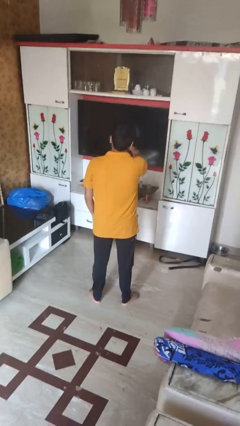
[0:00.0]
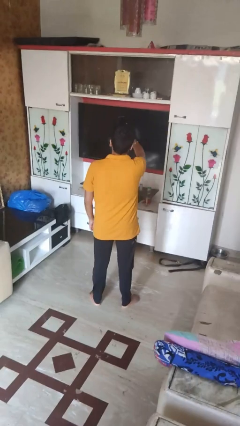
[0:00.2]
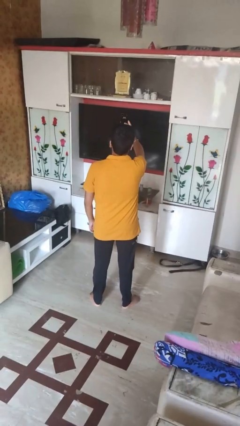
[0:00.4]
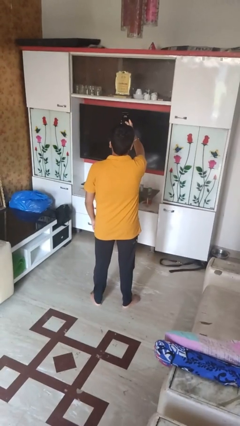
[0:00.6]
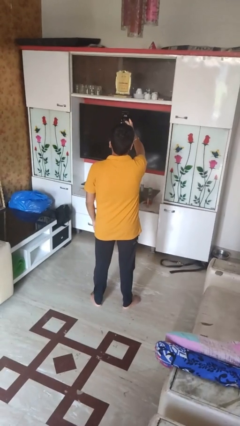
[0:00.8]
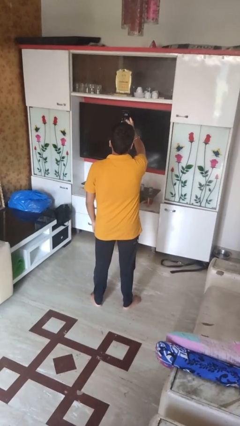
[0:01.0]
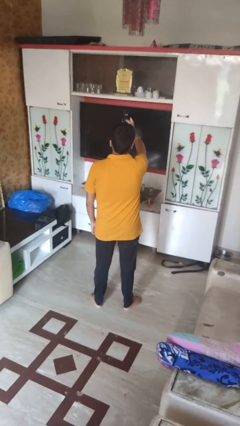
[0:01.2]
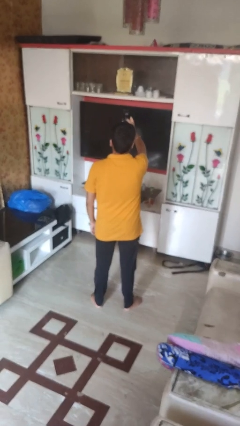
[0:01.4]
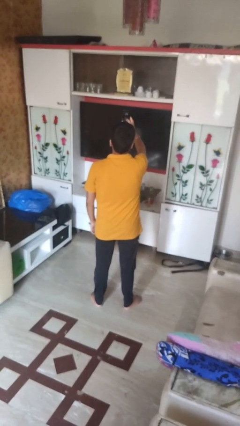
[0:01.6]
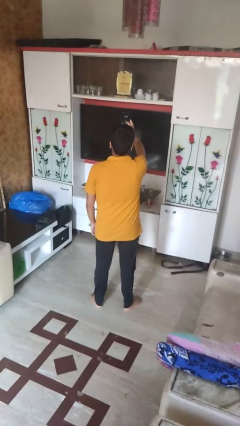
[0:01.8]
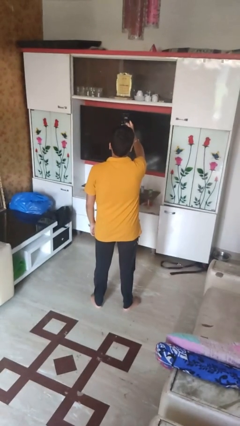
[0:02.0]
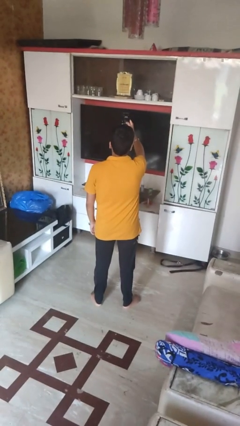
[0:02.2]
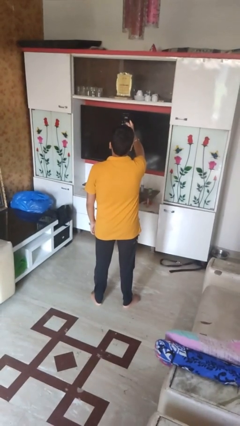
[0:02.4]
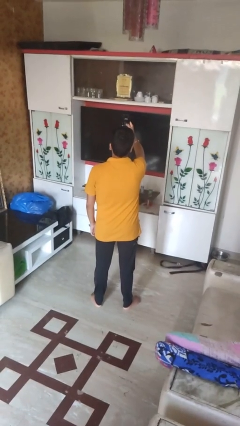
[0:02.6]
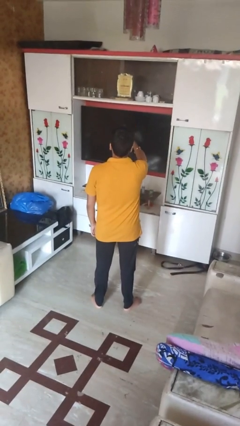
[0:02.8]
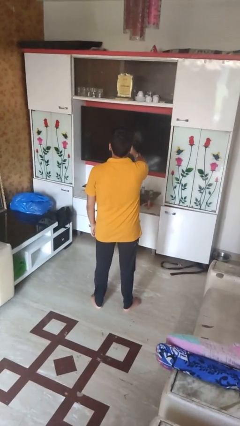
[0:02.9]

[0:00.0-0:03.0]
person takes selfie

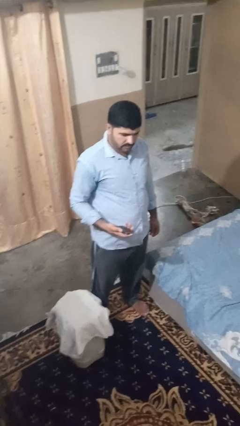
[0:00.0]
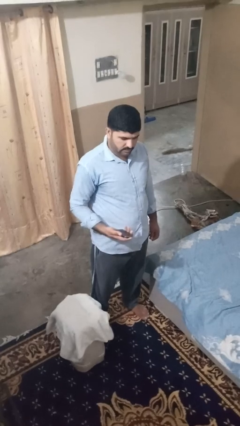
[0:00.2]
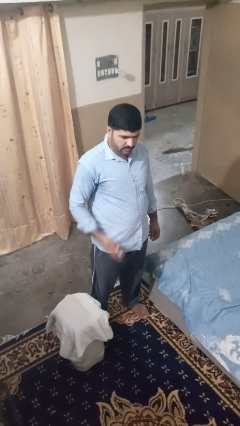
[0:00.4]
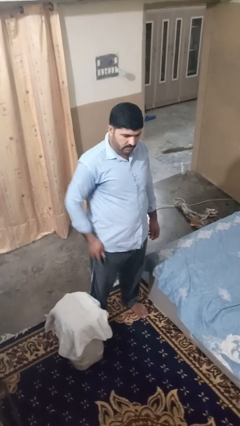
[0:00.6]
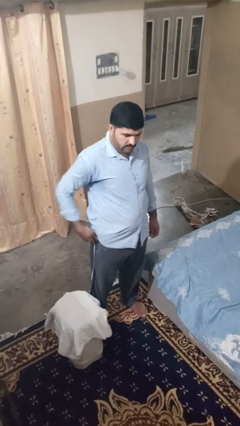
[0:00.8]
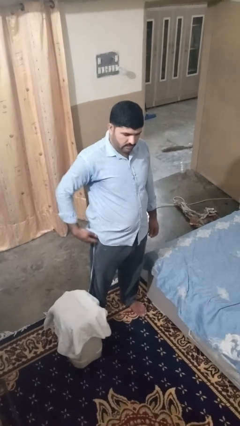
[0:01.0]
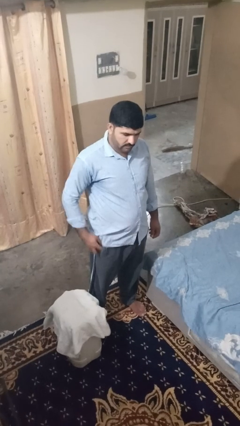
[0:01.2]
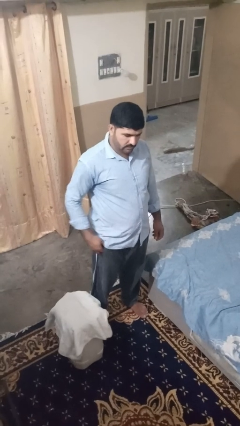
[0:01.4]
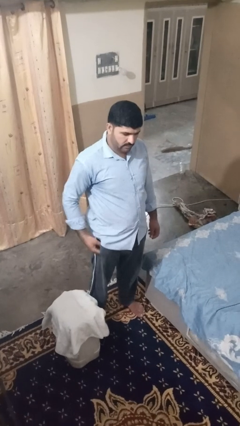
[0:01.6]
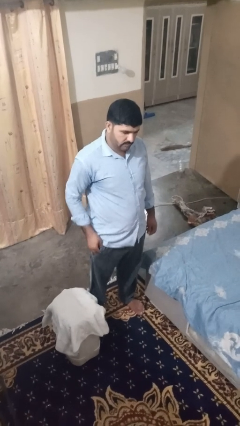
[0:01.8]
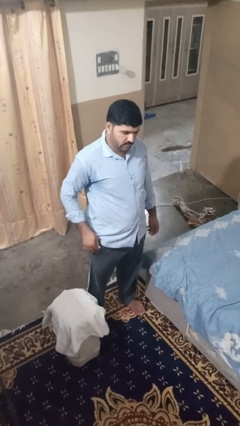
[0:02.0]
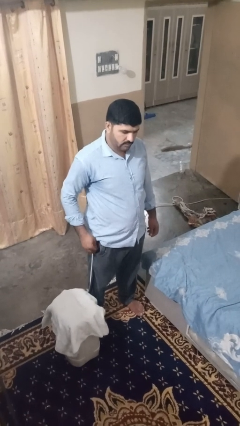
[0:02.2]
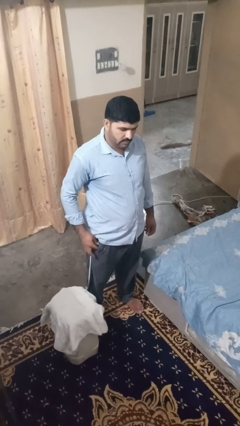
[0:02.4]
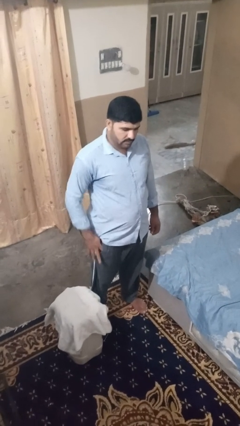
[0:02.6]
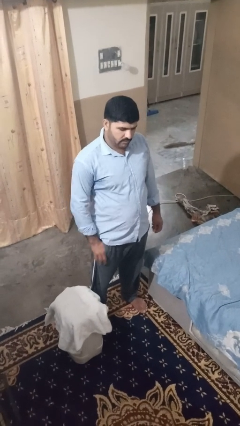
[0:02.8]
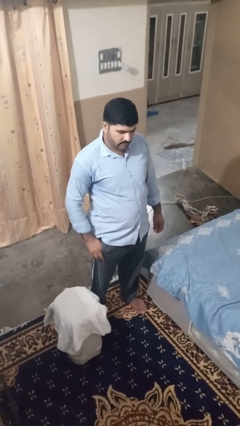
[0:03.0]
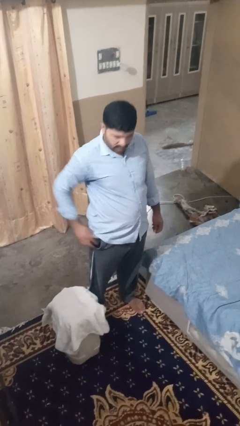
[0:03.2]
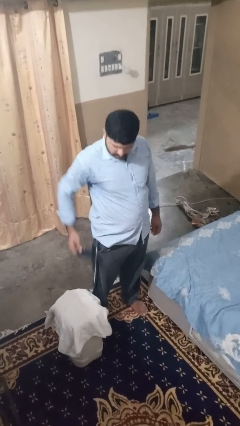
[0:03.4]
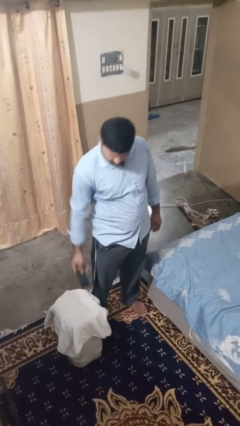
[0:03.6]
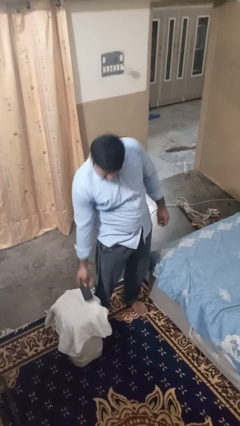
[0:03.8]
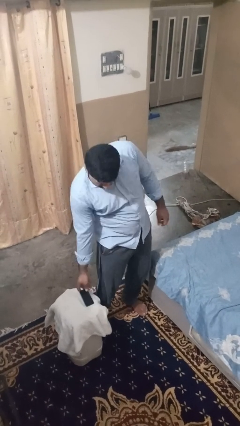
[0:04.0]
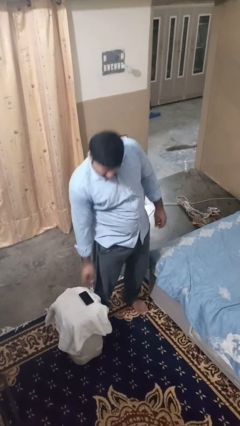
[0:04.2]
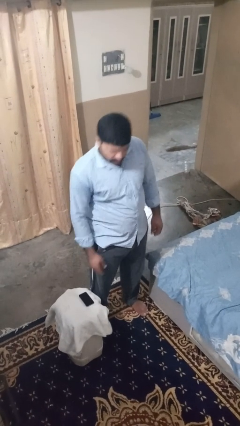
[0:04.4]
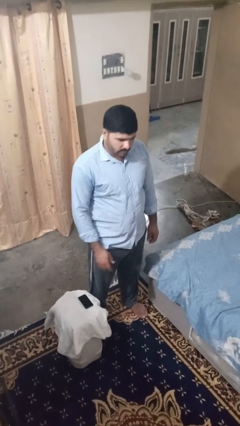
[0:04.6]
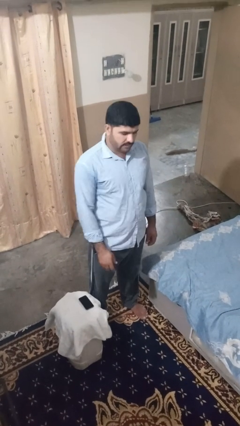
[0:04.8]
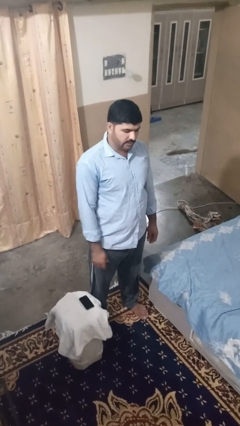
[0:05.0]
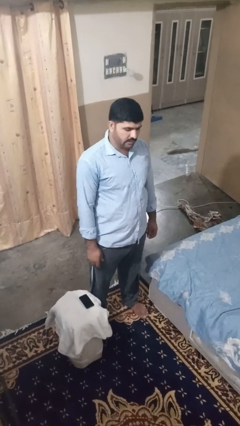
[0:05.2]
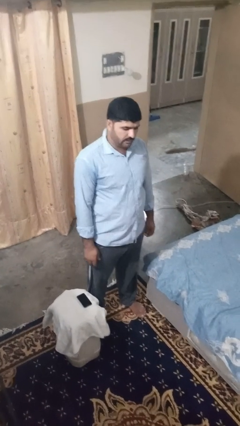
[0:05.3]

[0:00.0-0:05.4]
person puts phone into pocket

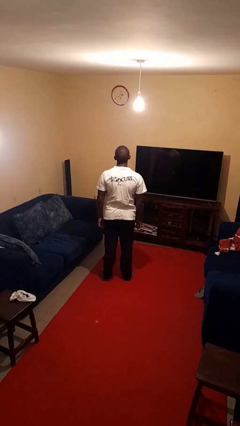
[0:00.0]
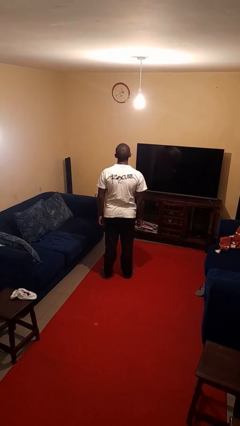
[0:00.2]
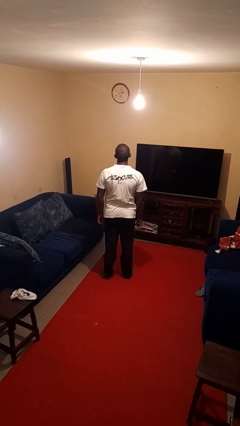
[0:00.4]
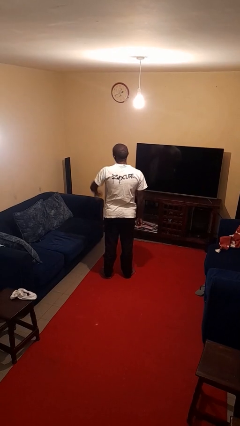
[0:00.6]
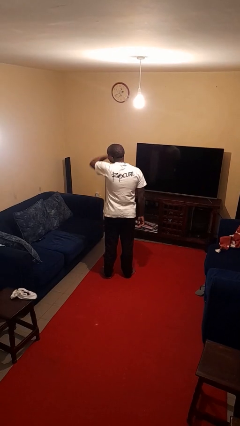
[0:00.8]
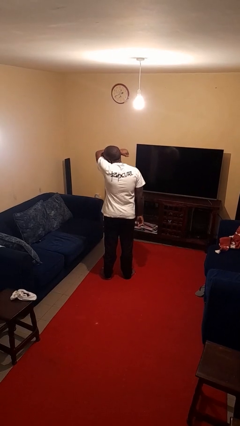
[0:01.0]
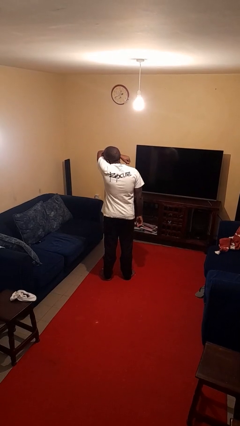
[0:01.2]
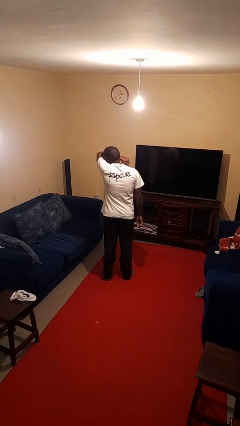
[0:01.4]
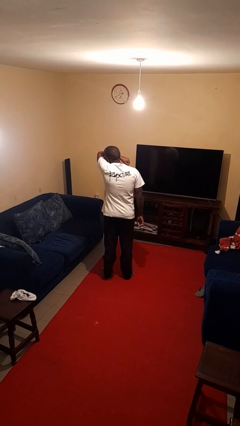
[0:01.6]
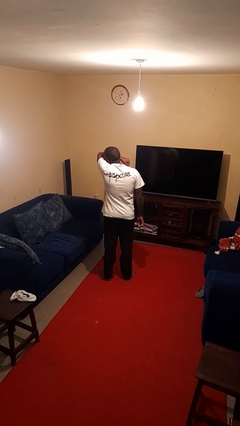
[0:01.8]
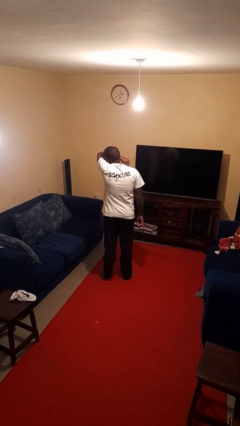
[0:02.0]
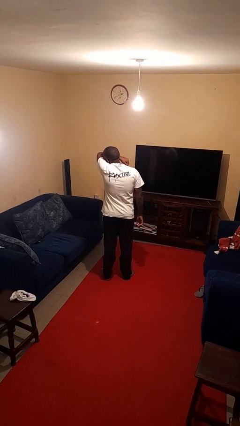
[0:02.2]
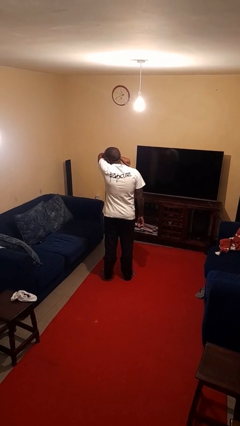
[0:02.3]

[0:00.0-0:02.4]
person sneezes into arm

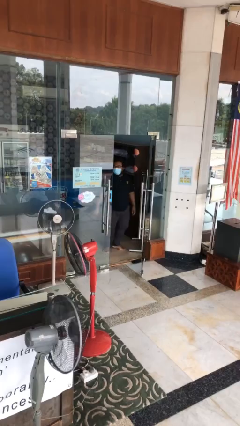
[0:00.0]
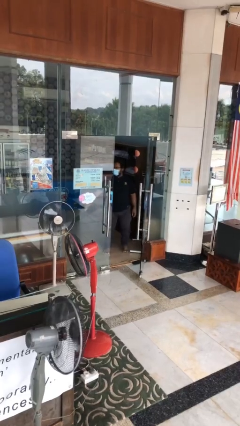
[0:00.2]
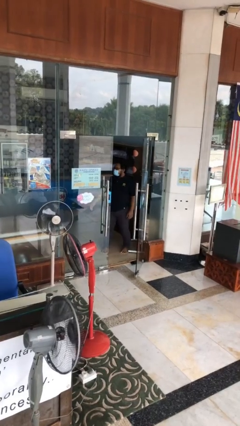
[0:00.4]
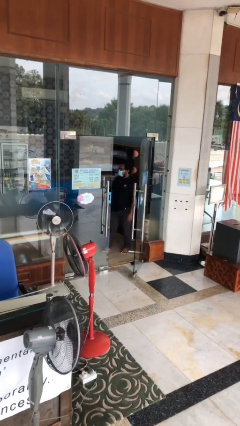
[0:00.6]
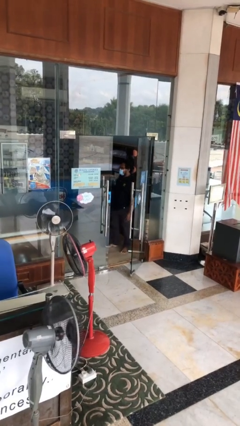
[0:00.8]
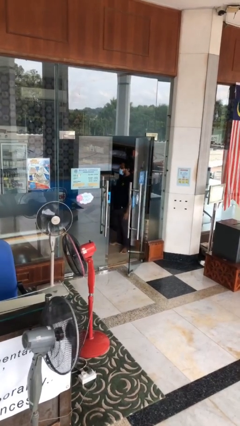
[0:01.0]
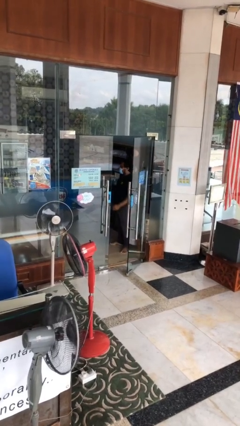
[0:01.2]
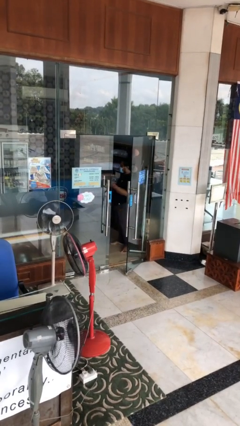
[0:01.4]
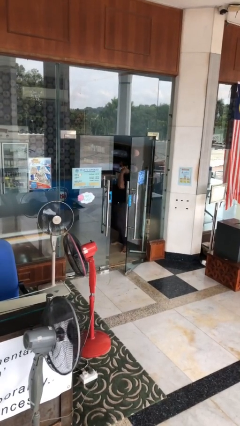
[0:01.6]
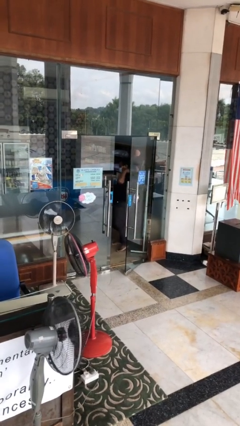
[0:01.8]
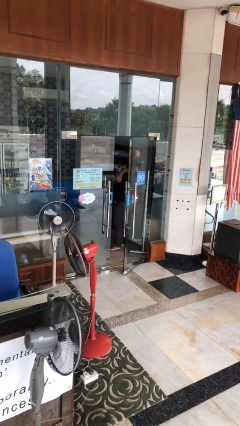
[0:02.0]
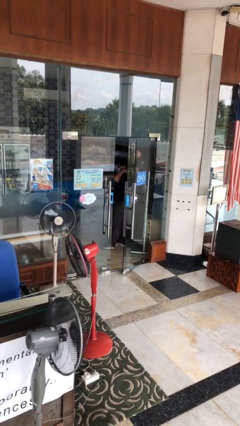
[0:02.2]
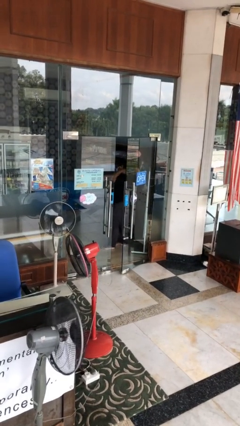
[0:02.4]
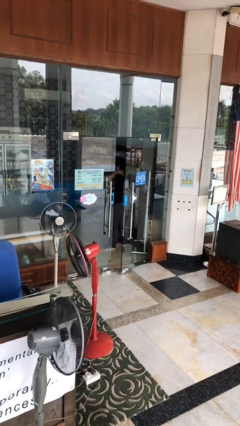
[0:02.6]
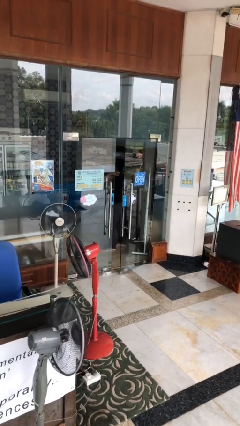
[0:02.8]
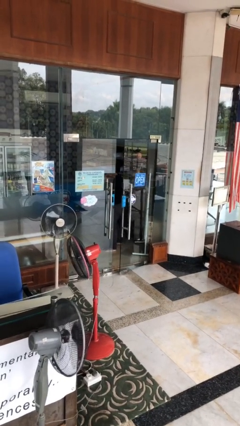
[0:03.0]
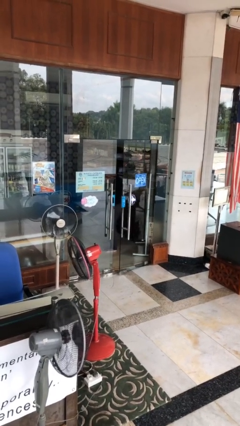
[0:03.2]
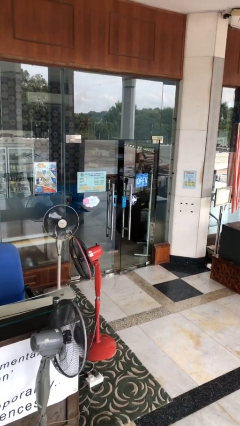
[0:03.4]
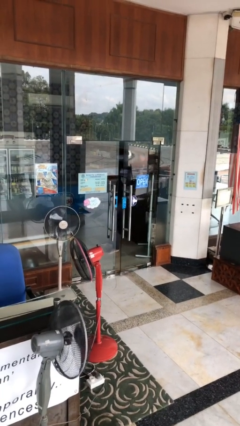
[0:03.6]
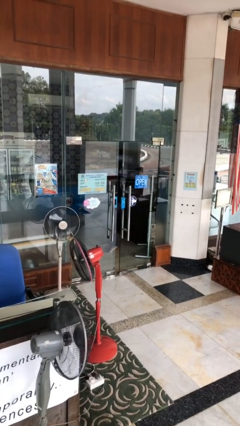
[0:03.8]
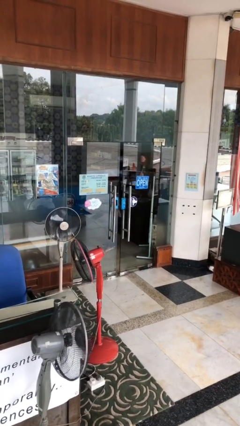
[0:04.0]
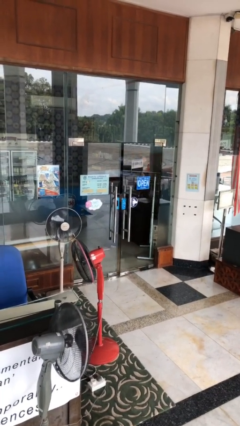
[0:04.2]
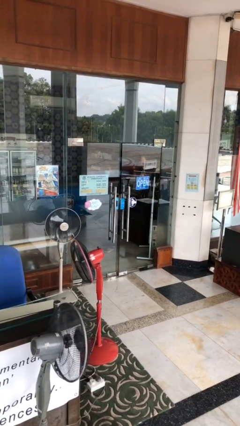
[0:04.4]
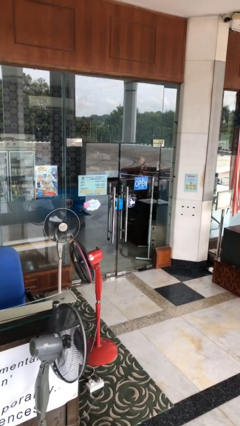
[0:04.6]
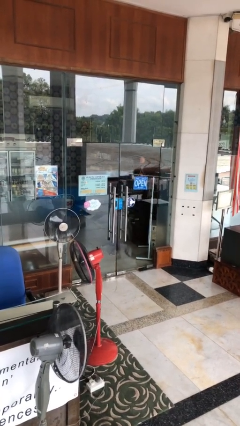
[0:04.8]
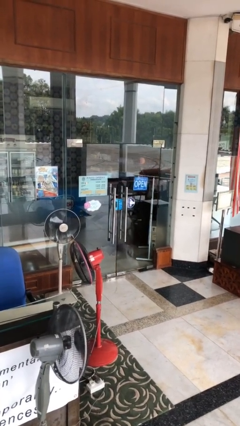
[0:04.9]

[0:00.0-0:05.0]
person closes facility door

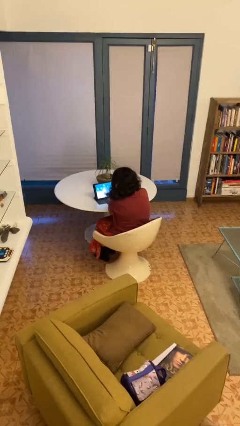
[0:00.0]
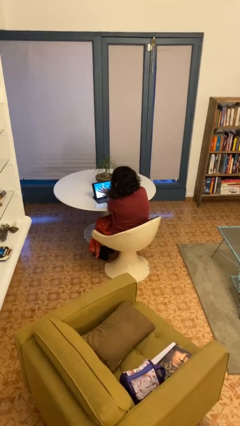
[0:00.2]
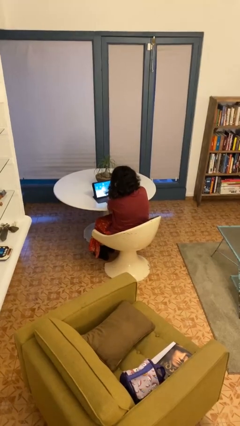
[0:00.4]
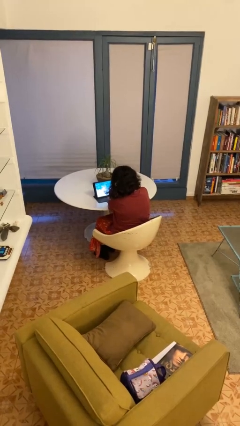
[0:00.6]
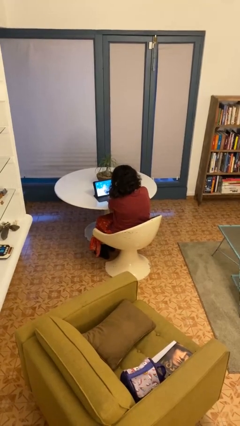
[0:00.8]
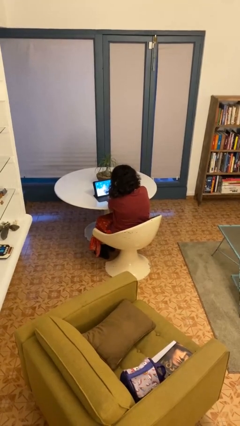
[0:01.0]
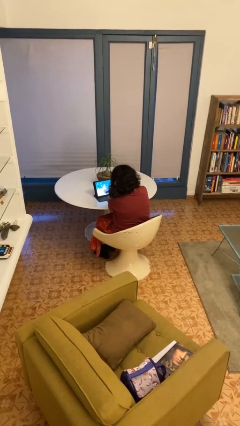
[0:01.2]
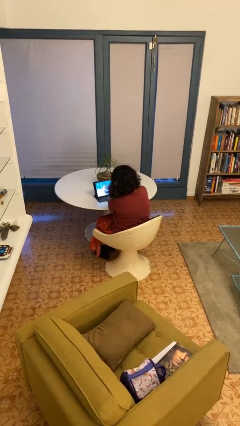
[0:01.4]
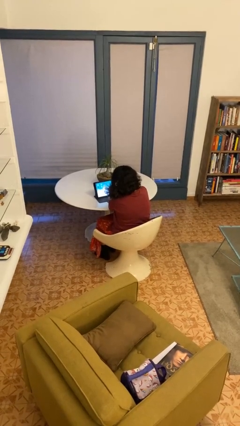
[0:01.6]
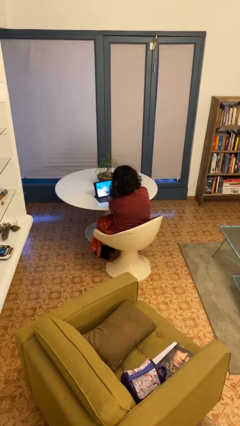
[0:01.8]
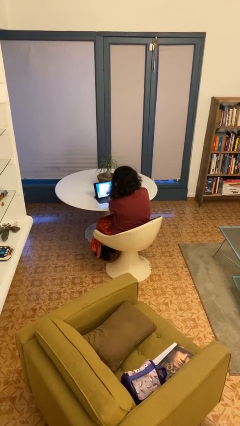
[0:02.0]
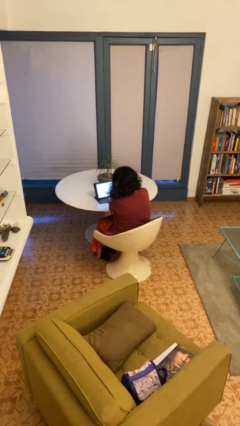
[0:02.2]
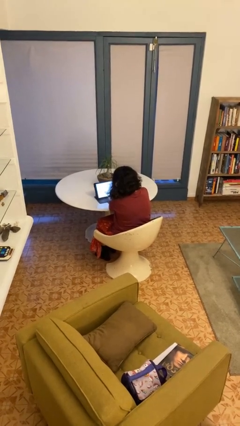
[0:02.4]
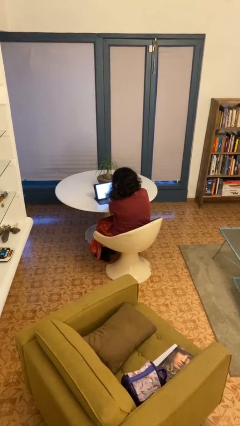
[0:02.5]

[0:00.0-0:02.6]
person interacts with tablet
